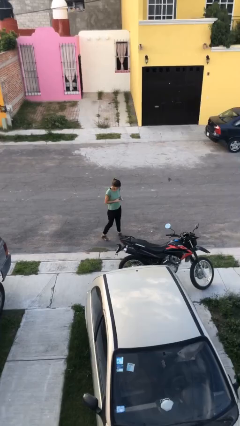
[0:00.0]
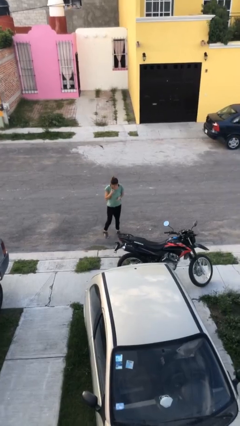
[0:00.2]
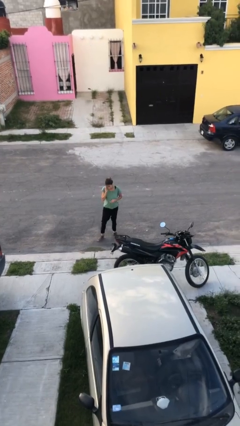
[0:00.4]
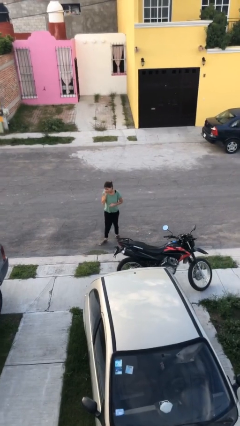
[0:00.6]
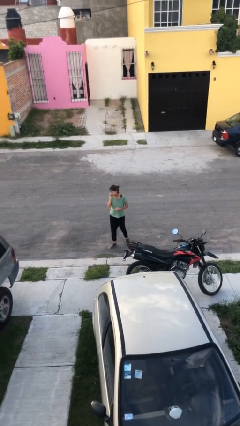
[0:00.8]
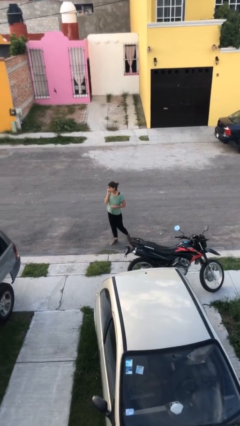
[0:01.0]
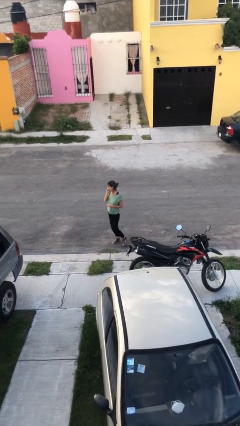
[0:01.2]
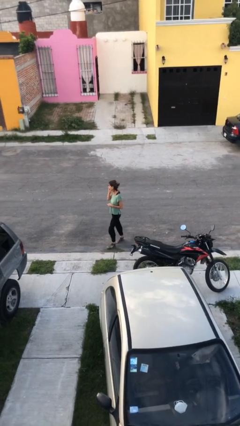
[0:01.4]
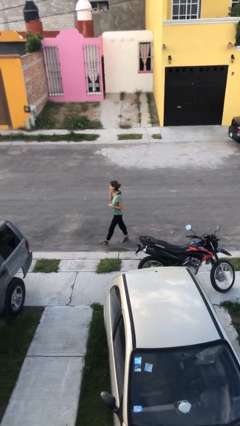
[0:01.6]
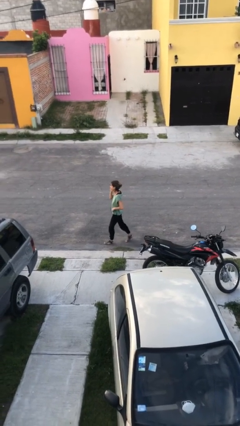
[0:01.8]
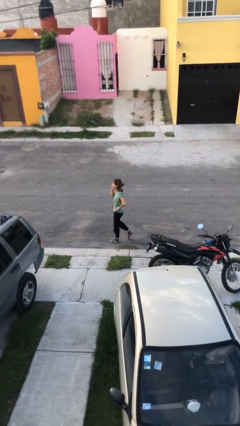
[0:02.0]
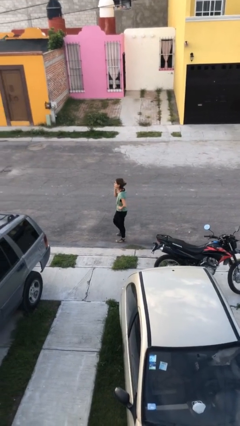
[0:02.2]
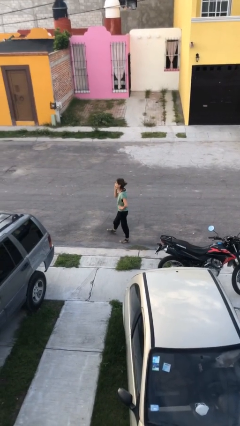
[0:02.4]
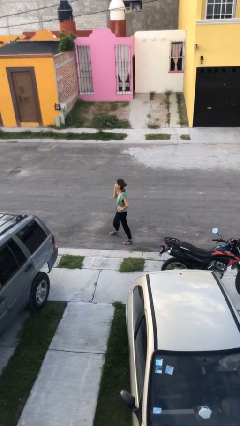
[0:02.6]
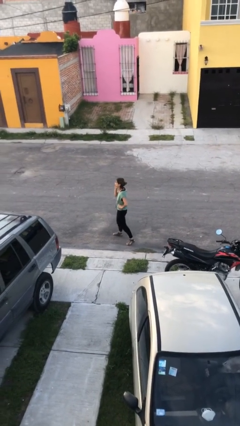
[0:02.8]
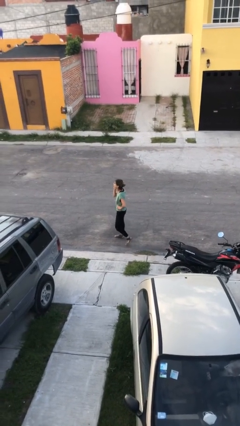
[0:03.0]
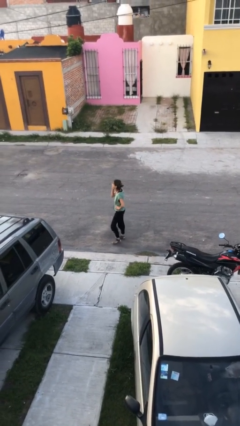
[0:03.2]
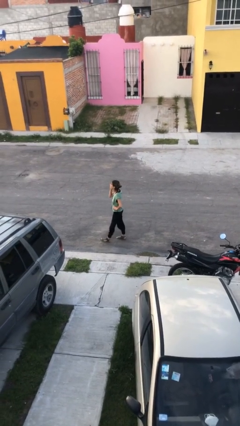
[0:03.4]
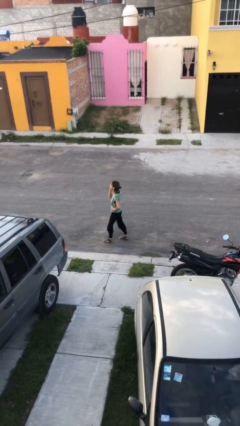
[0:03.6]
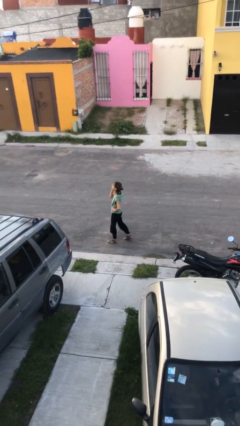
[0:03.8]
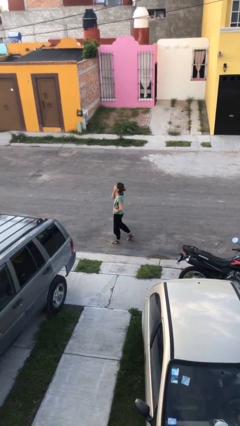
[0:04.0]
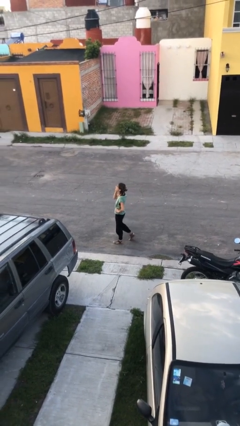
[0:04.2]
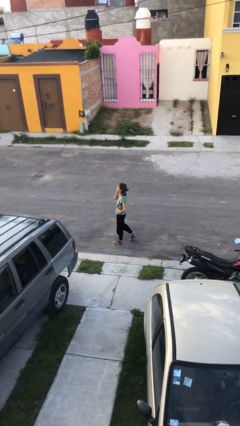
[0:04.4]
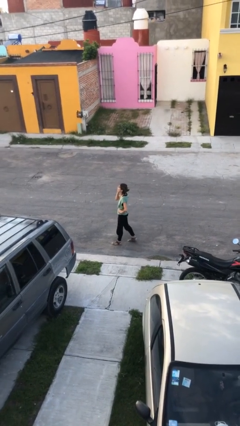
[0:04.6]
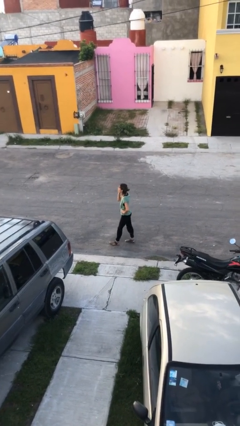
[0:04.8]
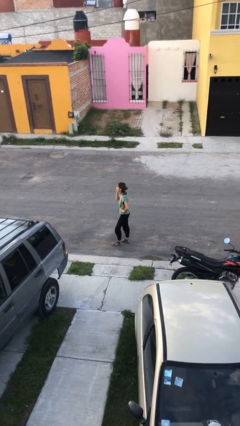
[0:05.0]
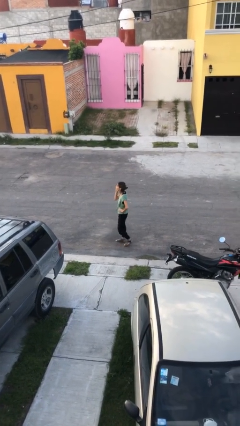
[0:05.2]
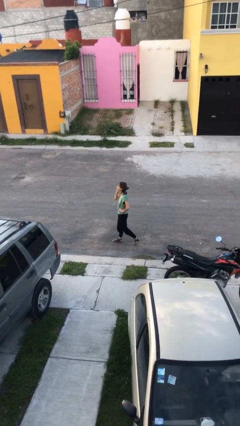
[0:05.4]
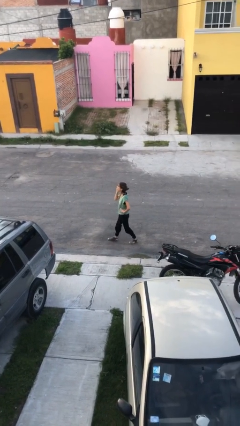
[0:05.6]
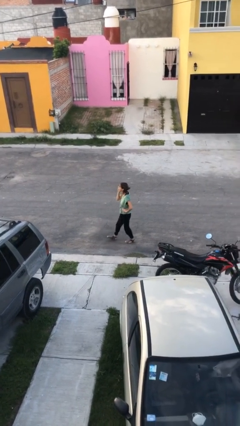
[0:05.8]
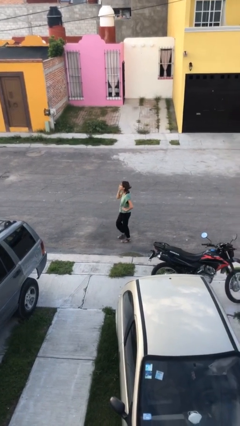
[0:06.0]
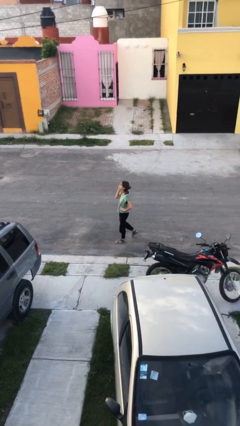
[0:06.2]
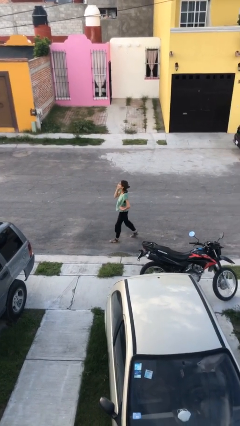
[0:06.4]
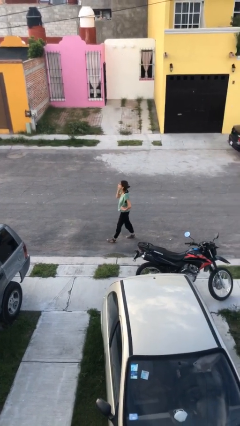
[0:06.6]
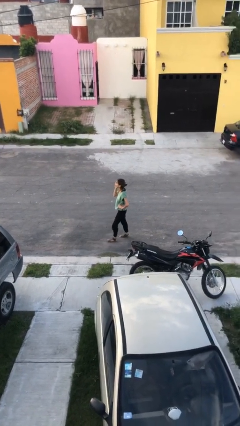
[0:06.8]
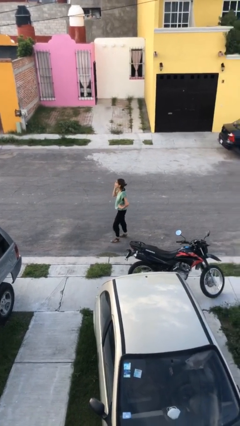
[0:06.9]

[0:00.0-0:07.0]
person talks on phone

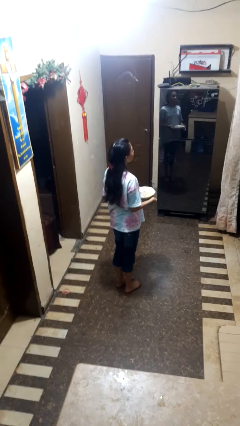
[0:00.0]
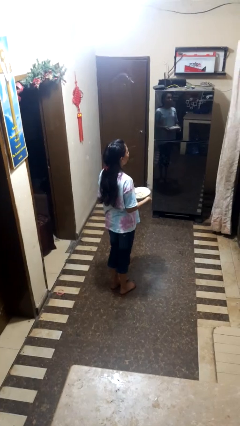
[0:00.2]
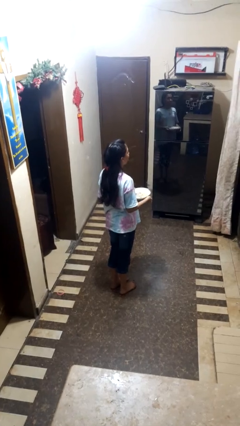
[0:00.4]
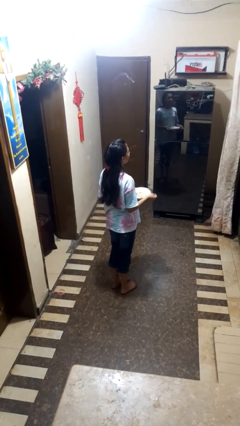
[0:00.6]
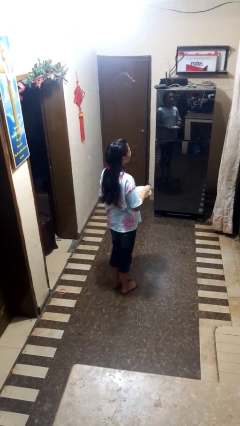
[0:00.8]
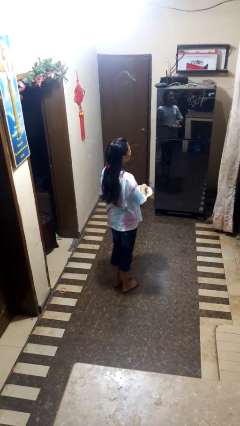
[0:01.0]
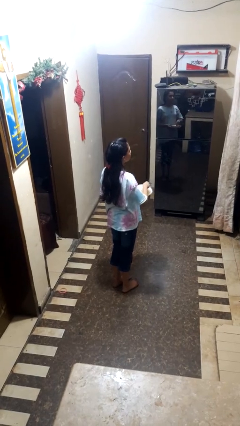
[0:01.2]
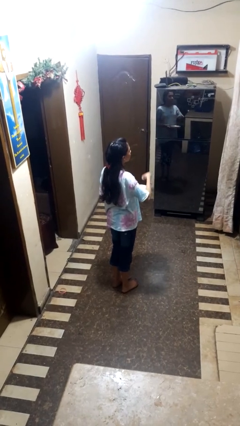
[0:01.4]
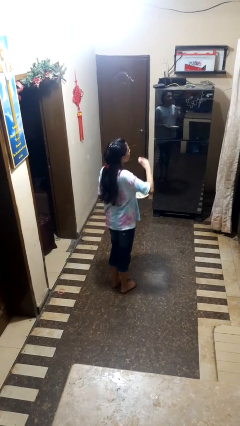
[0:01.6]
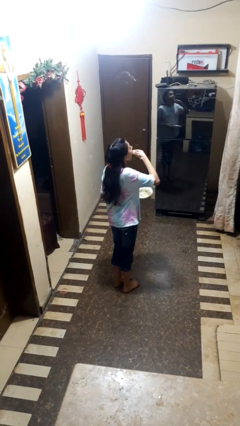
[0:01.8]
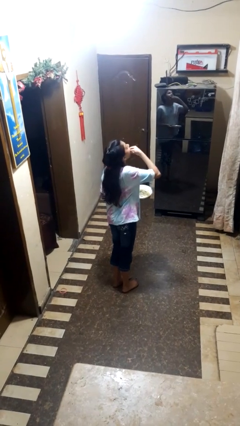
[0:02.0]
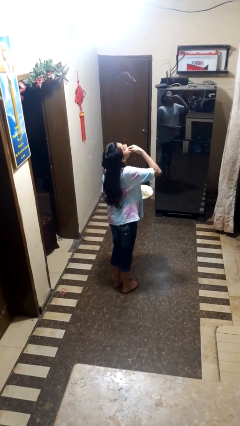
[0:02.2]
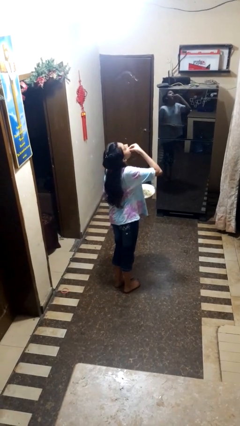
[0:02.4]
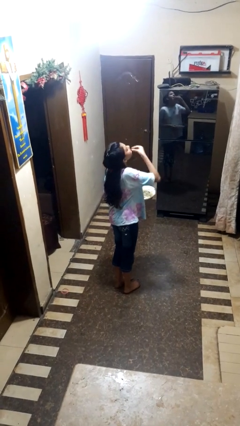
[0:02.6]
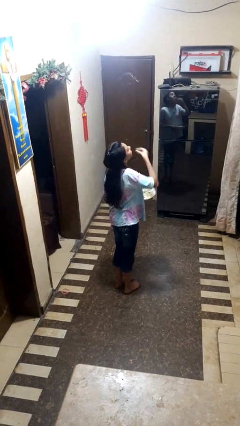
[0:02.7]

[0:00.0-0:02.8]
person eats with hands

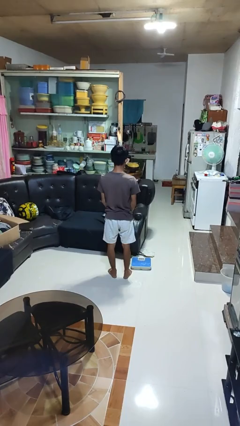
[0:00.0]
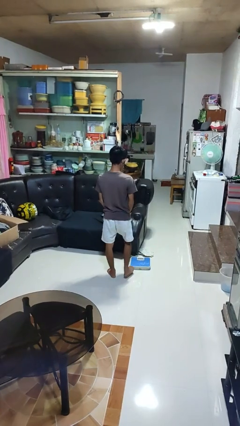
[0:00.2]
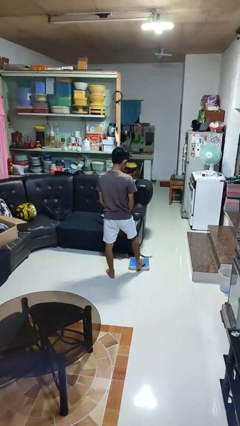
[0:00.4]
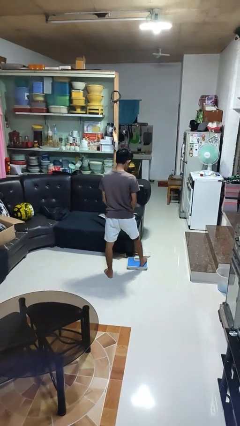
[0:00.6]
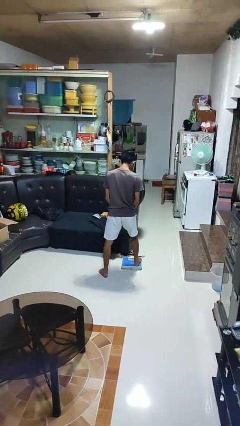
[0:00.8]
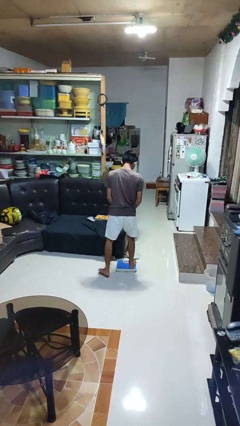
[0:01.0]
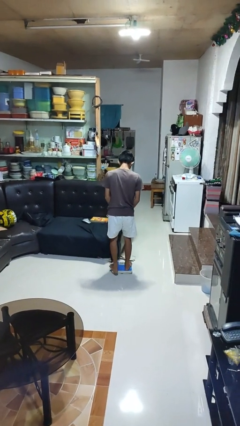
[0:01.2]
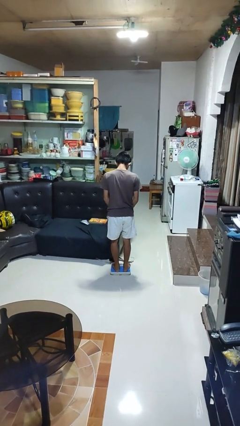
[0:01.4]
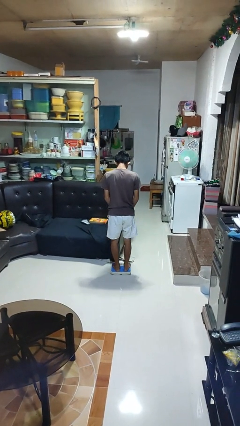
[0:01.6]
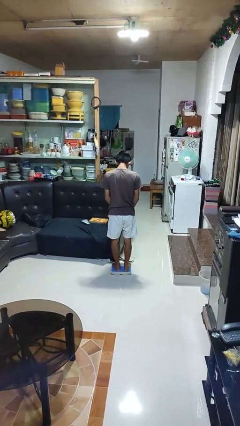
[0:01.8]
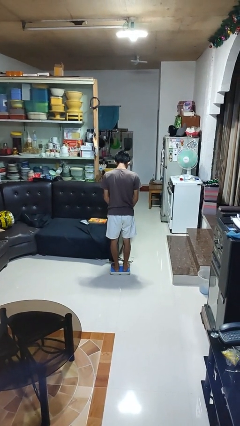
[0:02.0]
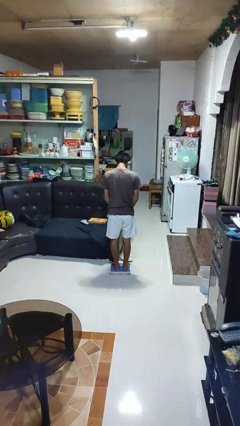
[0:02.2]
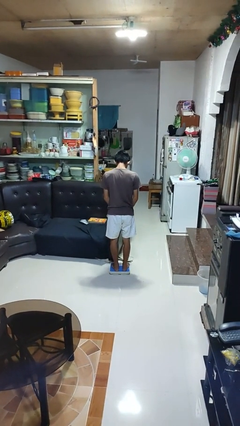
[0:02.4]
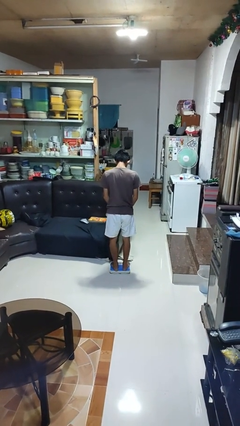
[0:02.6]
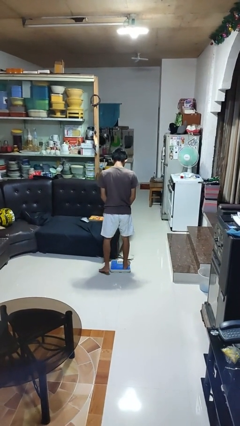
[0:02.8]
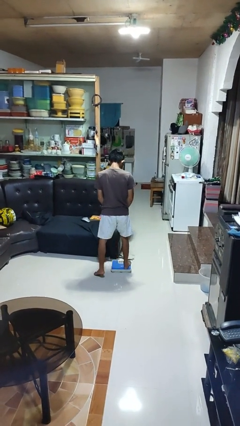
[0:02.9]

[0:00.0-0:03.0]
person uses bodyweight scale

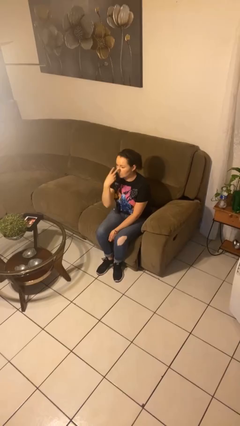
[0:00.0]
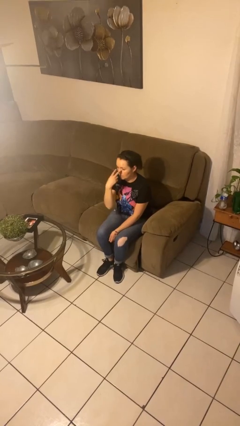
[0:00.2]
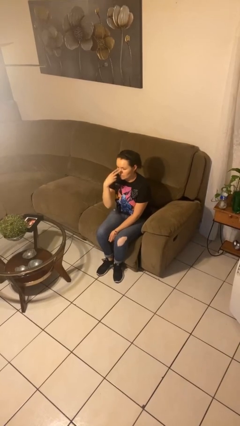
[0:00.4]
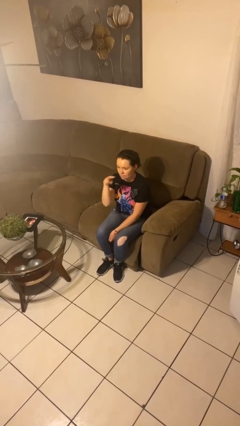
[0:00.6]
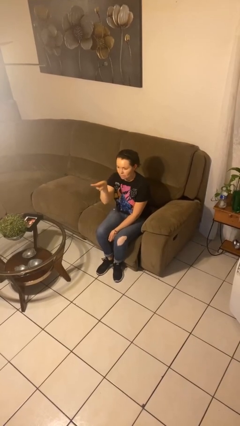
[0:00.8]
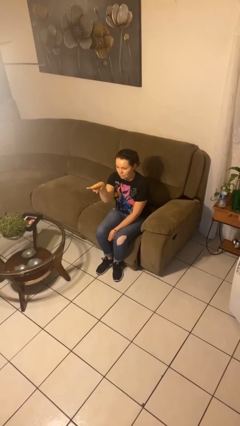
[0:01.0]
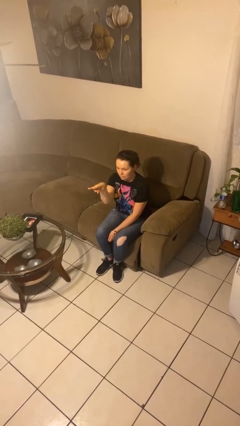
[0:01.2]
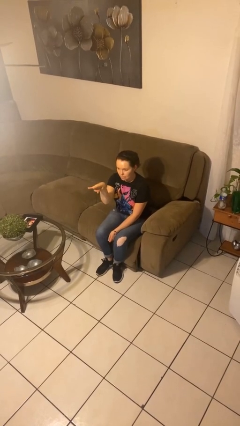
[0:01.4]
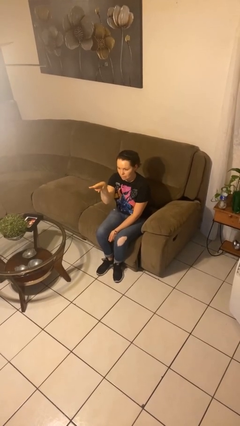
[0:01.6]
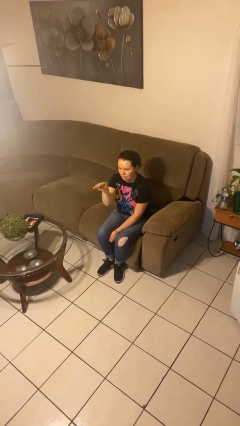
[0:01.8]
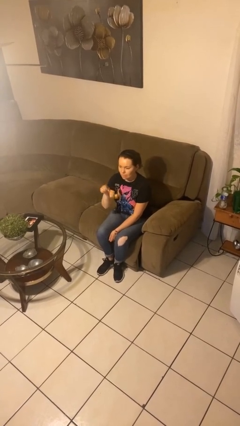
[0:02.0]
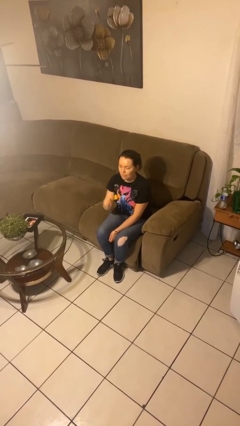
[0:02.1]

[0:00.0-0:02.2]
person gestures watch closely

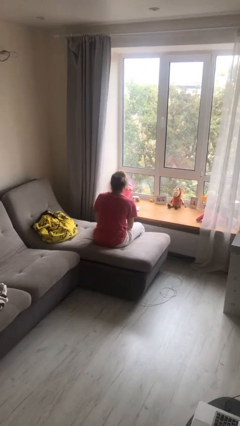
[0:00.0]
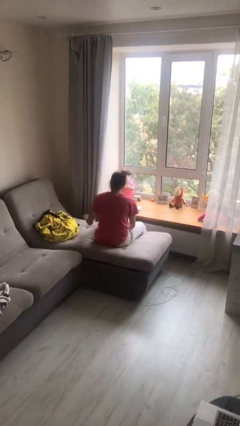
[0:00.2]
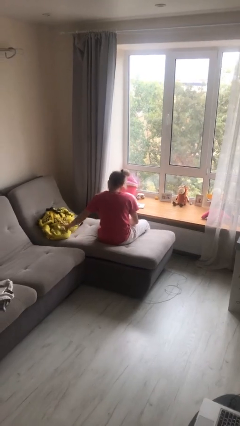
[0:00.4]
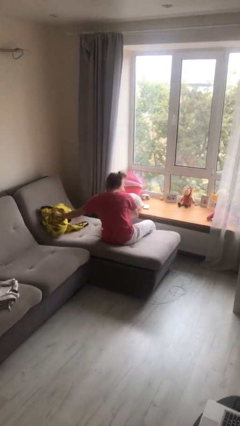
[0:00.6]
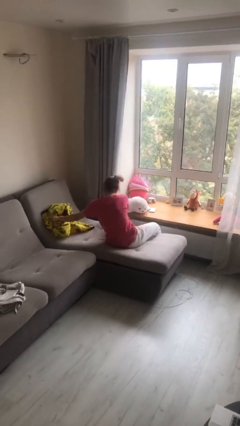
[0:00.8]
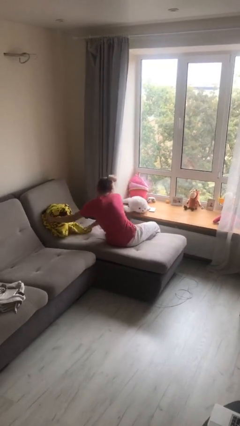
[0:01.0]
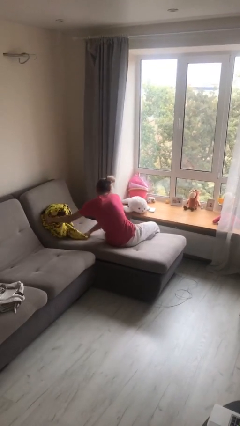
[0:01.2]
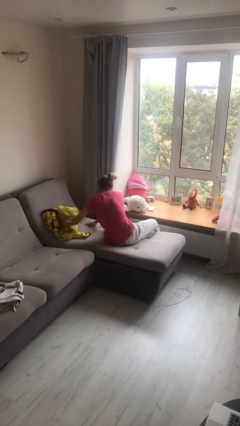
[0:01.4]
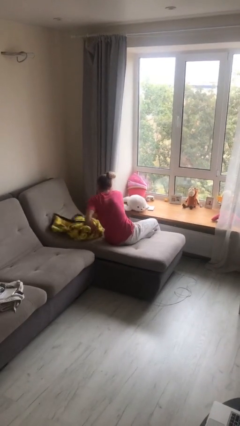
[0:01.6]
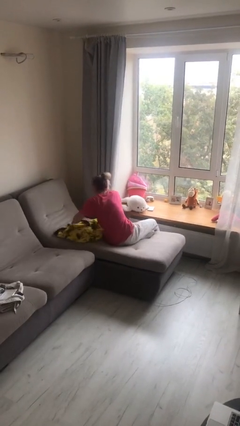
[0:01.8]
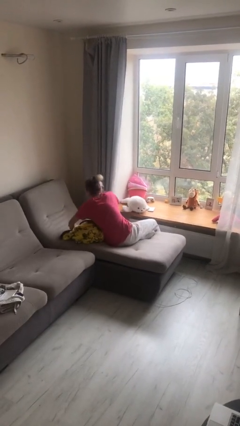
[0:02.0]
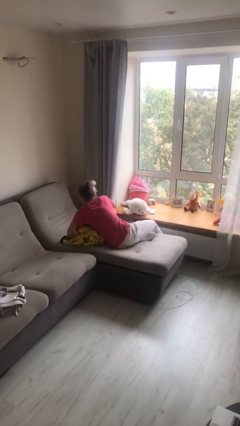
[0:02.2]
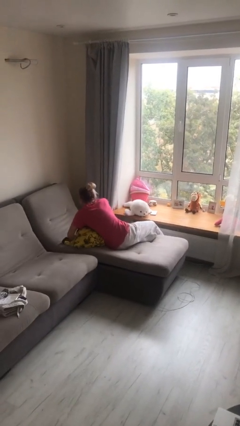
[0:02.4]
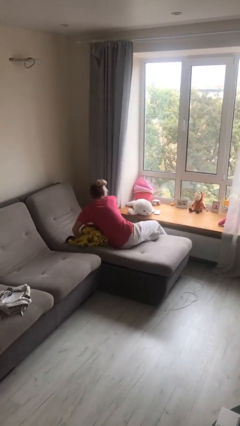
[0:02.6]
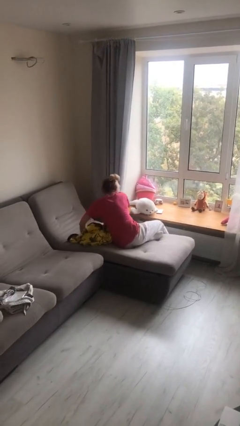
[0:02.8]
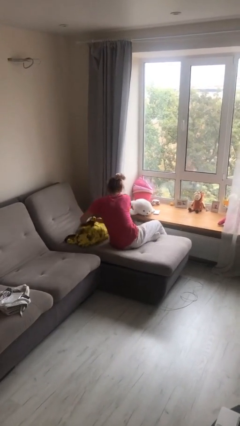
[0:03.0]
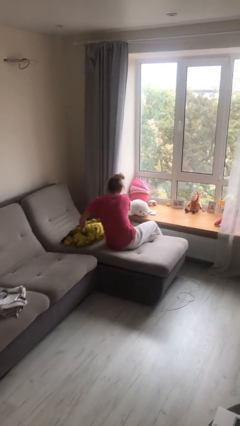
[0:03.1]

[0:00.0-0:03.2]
person searches in couch
